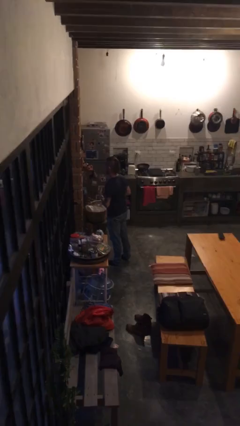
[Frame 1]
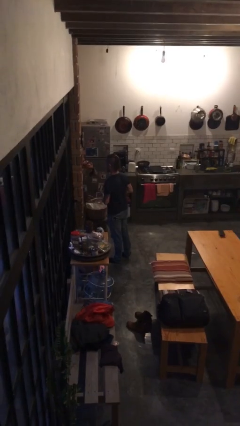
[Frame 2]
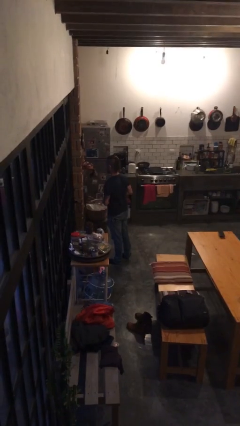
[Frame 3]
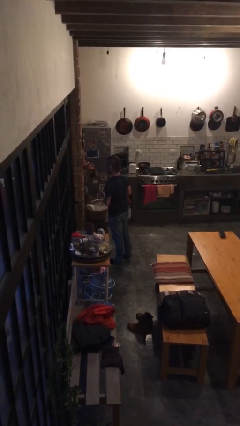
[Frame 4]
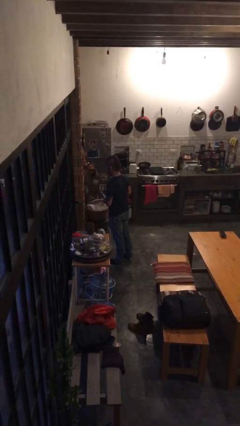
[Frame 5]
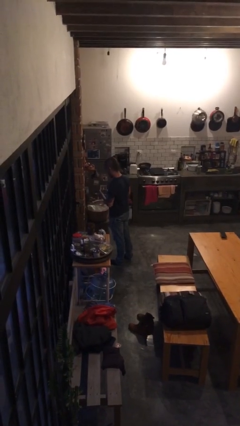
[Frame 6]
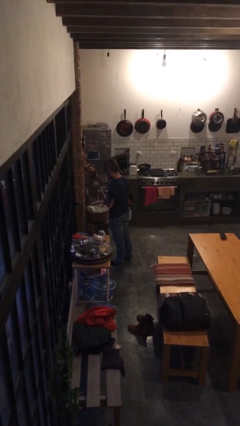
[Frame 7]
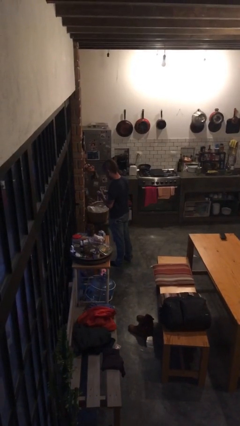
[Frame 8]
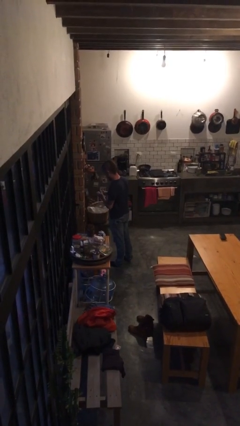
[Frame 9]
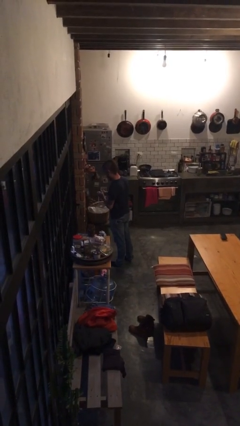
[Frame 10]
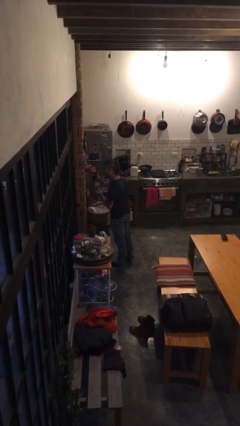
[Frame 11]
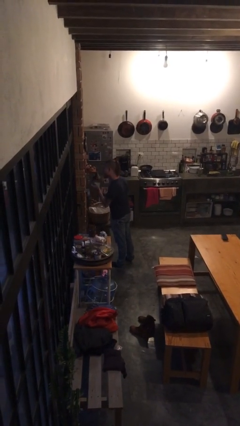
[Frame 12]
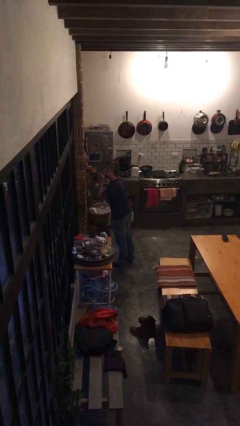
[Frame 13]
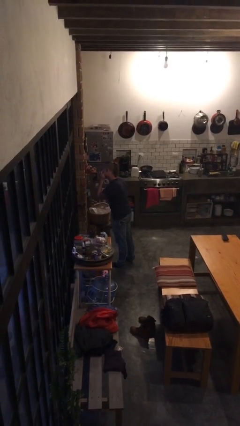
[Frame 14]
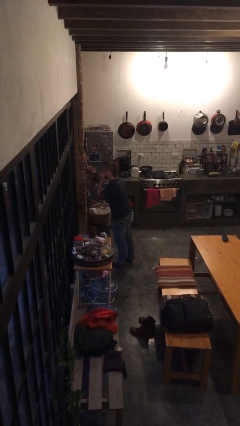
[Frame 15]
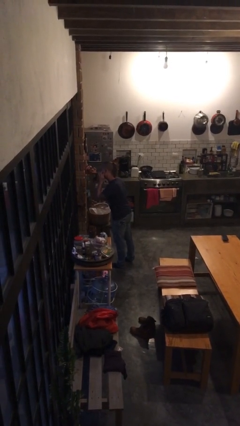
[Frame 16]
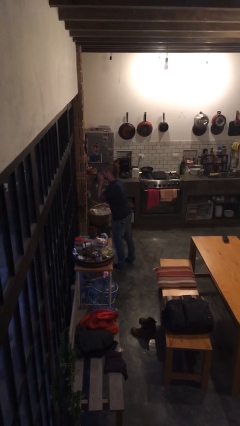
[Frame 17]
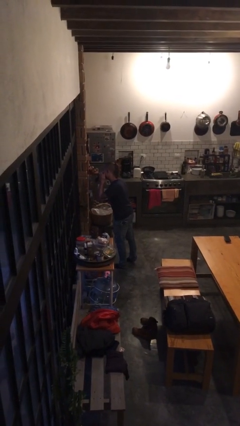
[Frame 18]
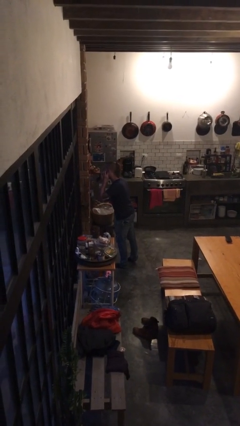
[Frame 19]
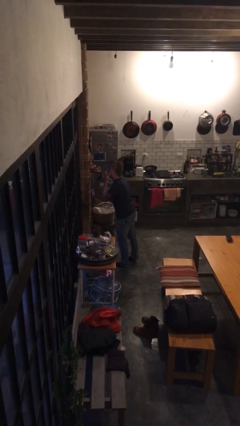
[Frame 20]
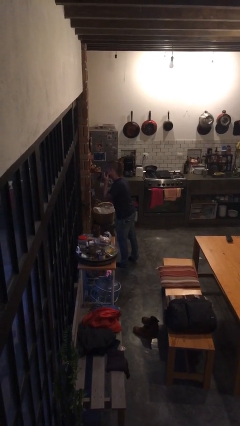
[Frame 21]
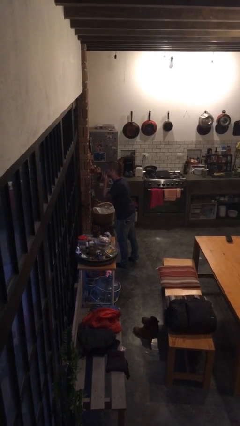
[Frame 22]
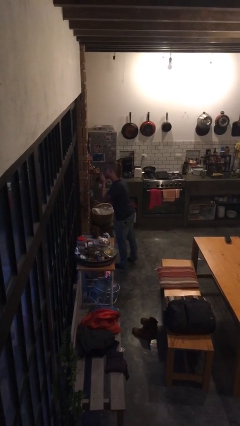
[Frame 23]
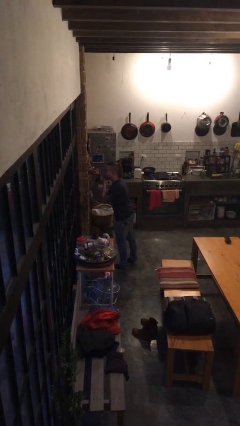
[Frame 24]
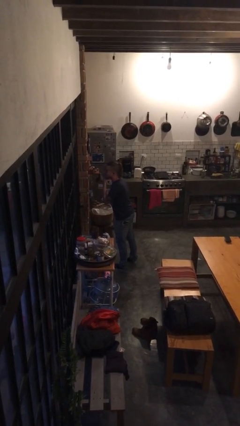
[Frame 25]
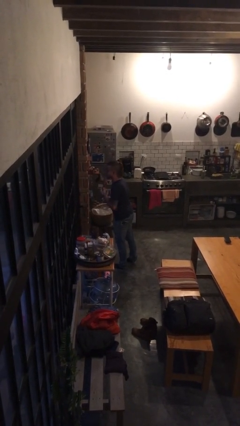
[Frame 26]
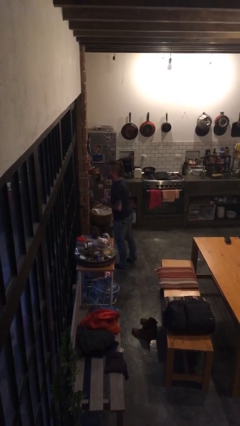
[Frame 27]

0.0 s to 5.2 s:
person applies foundation makeup

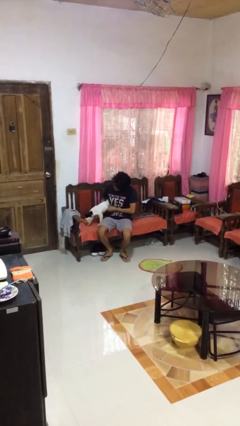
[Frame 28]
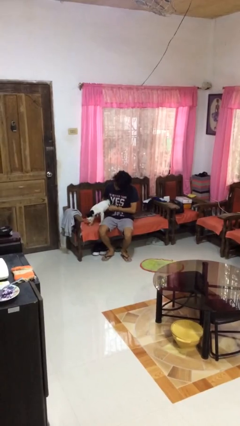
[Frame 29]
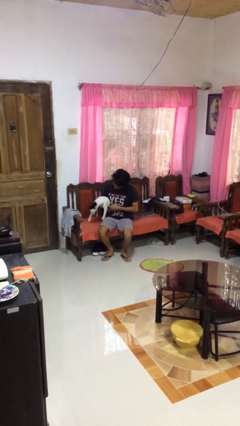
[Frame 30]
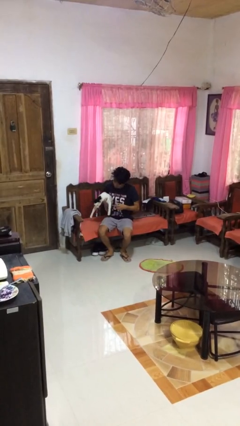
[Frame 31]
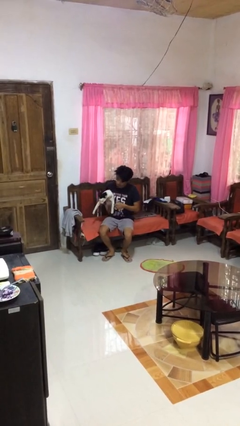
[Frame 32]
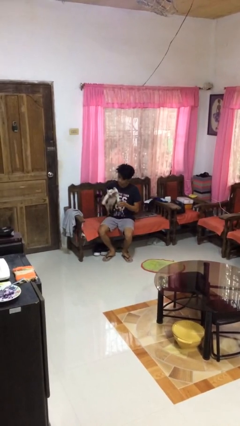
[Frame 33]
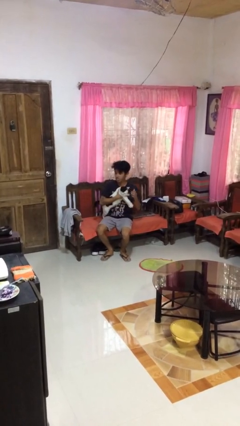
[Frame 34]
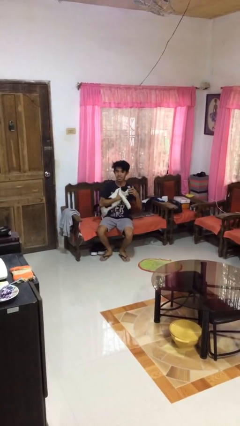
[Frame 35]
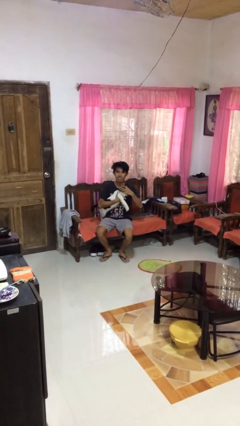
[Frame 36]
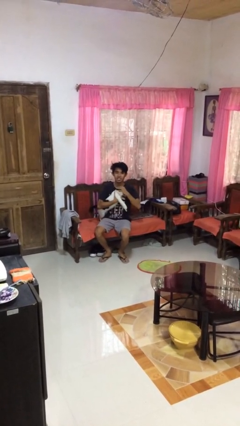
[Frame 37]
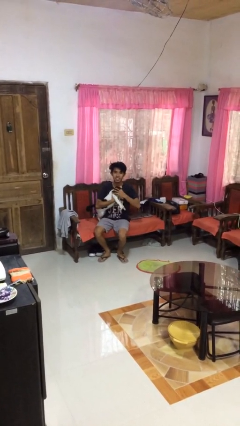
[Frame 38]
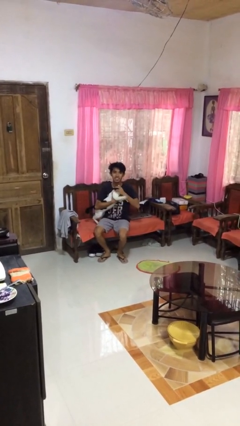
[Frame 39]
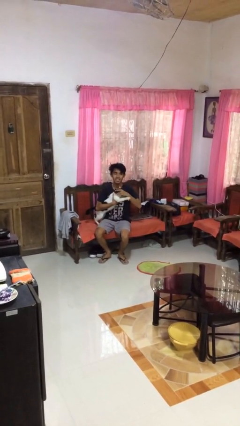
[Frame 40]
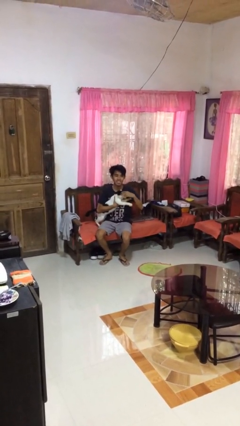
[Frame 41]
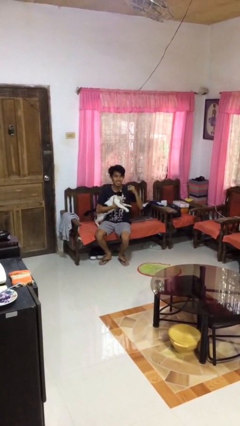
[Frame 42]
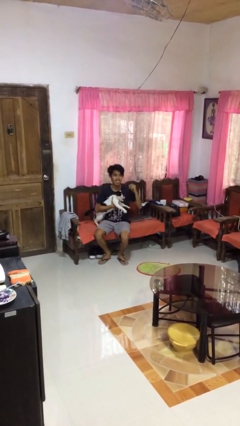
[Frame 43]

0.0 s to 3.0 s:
person hugs cat

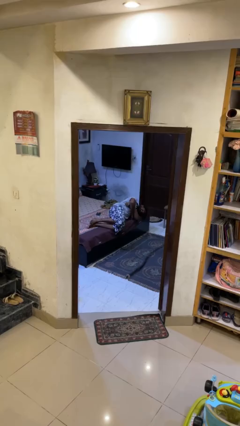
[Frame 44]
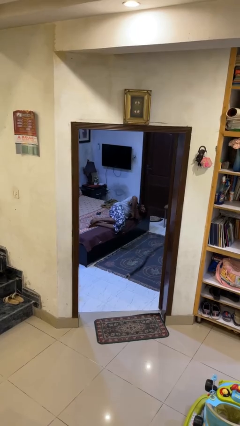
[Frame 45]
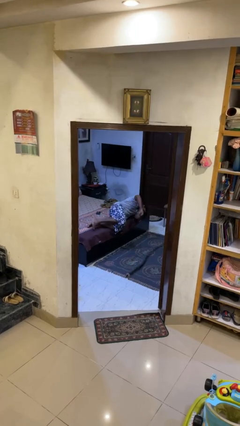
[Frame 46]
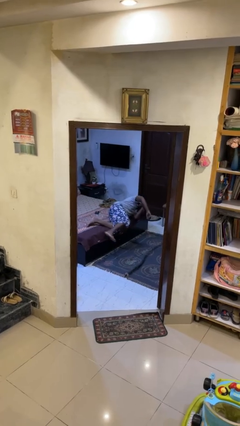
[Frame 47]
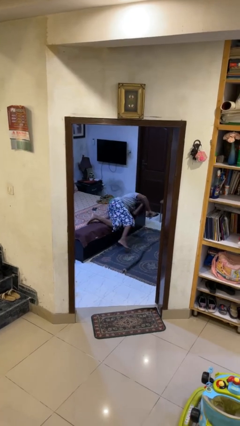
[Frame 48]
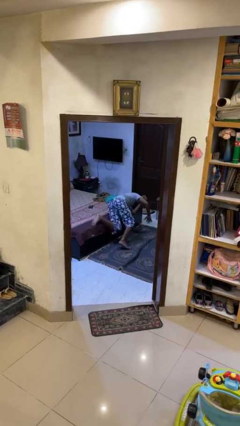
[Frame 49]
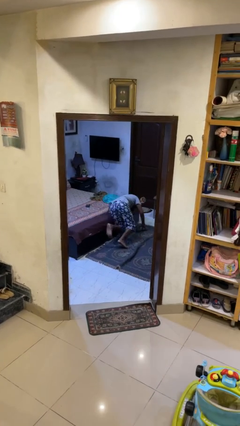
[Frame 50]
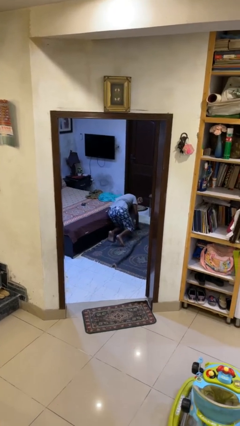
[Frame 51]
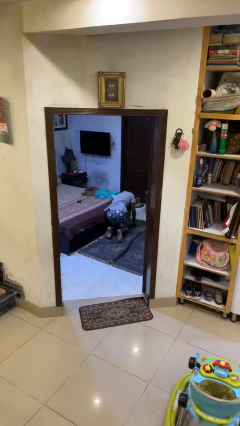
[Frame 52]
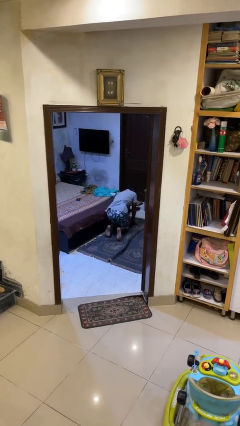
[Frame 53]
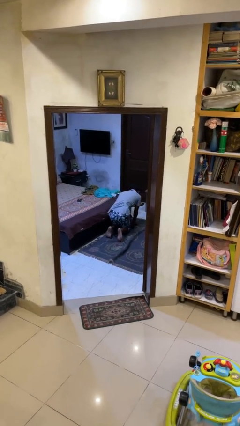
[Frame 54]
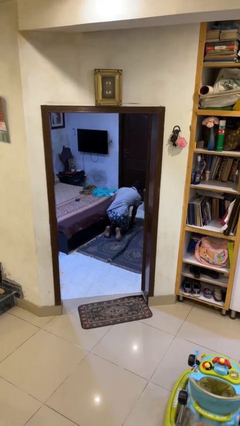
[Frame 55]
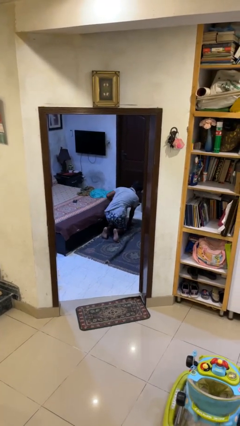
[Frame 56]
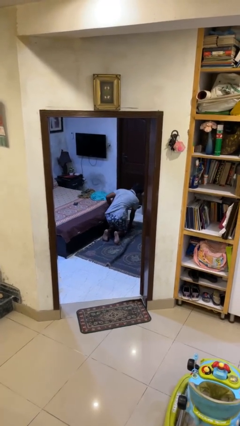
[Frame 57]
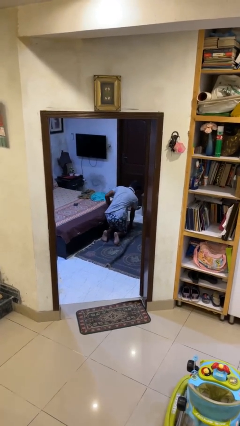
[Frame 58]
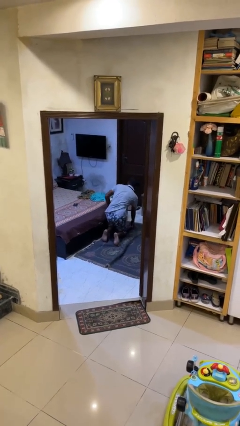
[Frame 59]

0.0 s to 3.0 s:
person falls from bed

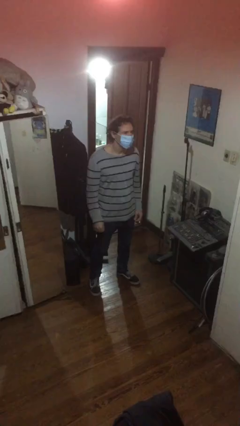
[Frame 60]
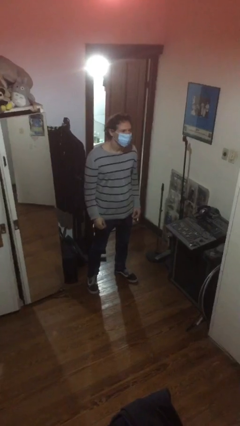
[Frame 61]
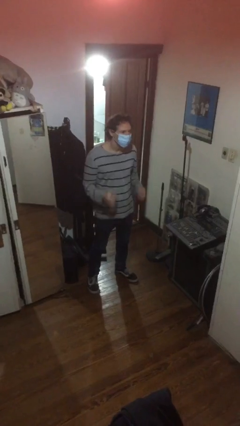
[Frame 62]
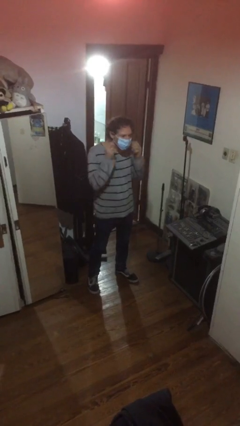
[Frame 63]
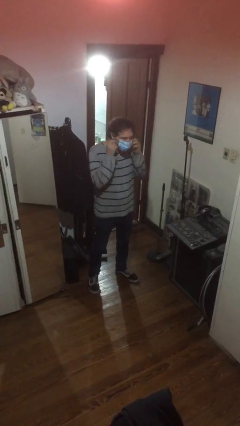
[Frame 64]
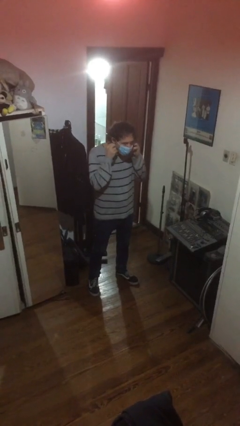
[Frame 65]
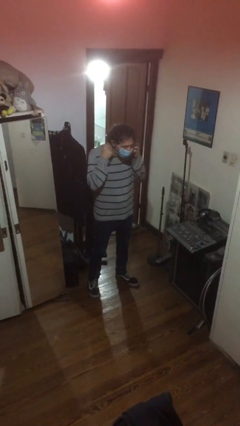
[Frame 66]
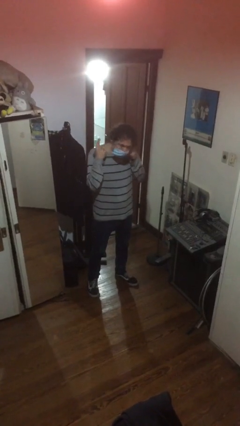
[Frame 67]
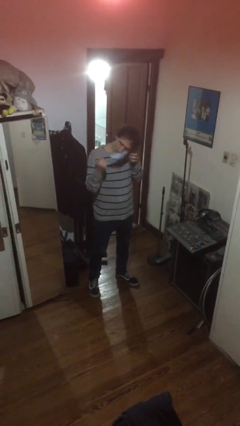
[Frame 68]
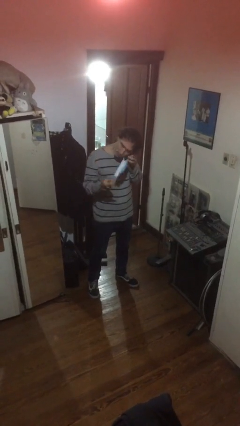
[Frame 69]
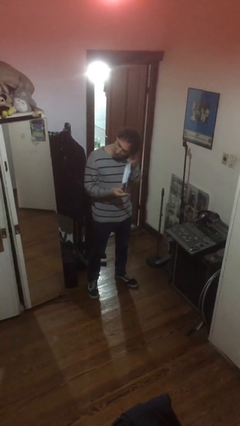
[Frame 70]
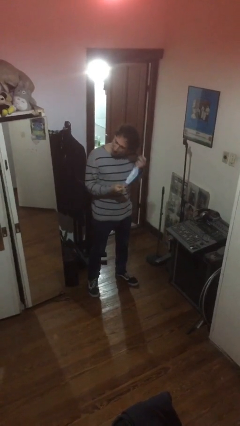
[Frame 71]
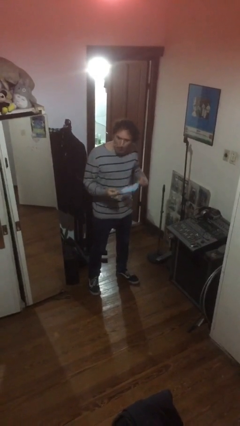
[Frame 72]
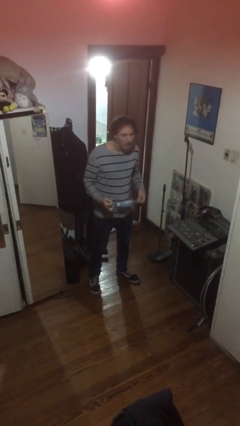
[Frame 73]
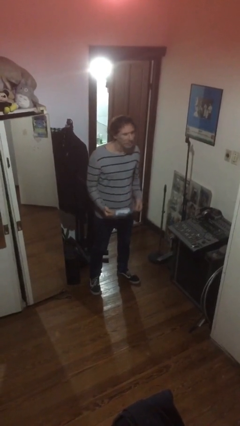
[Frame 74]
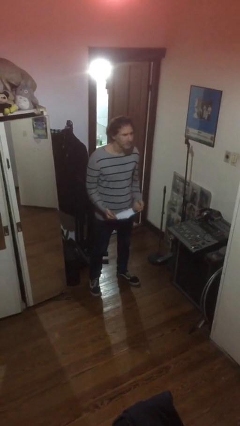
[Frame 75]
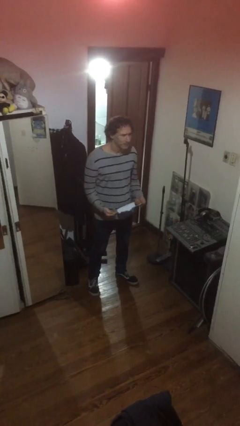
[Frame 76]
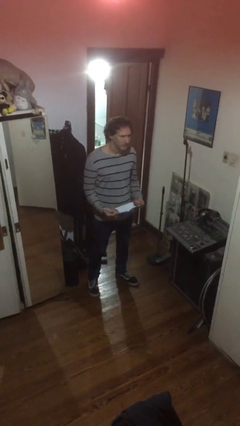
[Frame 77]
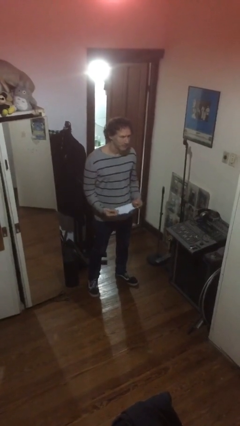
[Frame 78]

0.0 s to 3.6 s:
person takes off facemask

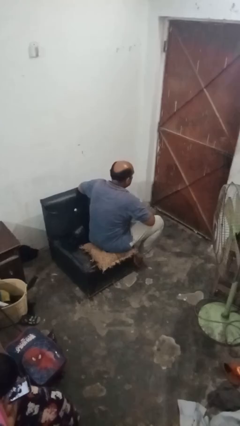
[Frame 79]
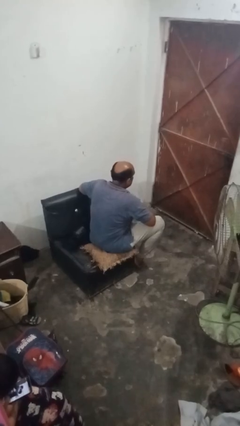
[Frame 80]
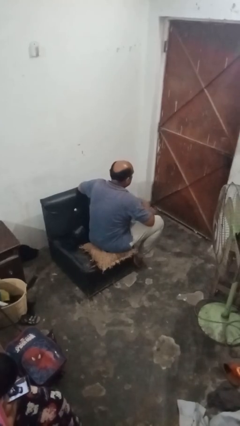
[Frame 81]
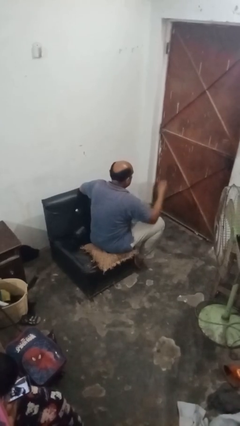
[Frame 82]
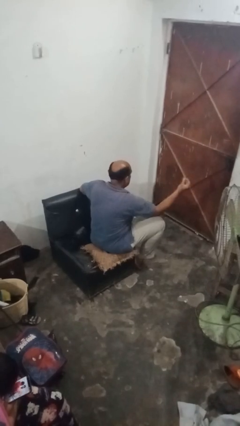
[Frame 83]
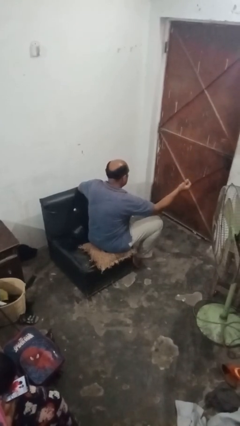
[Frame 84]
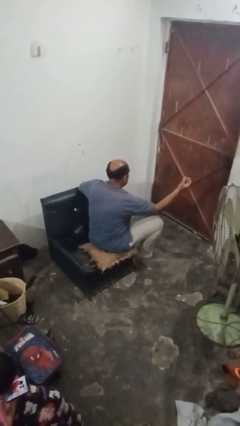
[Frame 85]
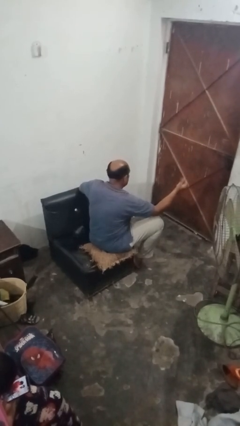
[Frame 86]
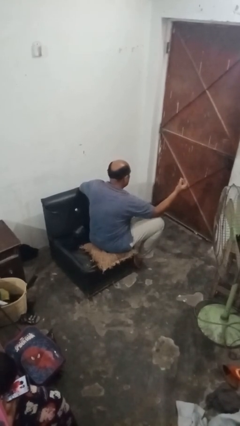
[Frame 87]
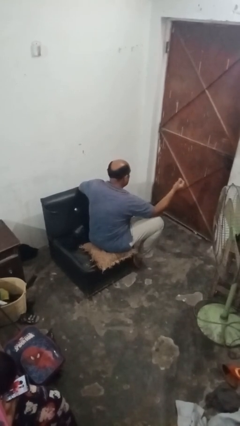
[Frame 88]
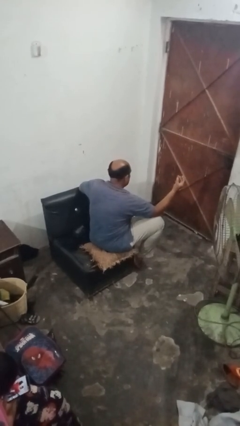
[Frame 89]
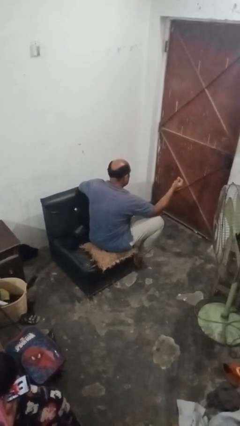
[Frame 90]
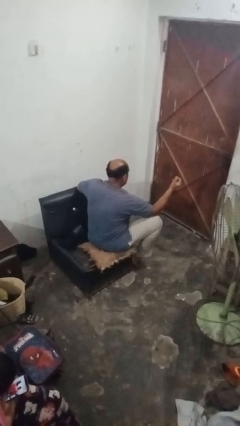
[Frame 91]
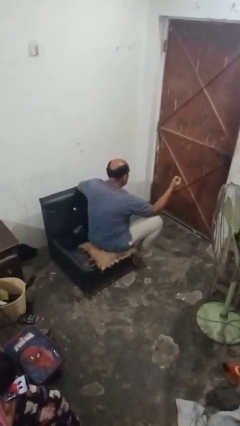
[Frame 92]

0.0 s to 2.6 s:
person snaps fingers

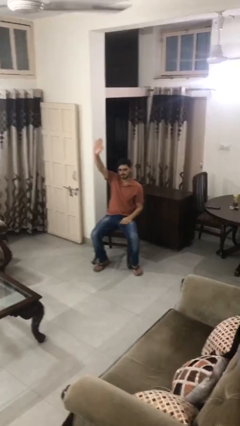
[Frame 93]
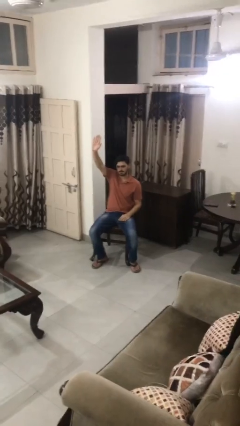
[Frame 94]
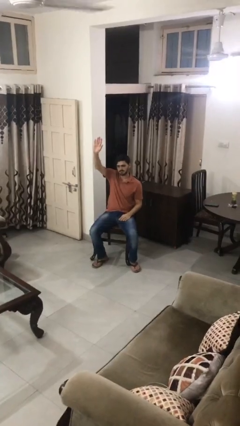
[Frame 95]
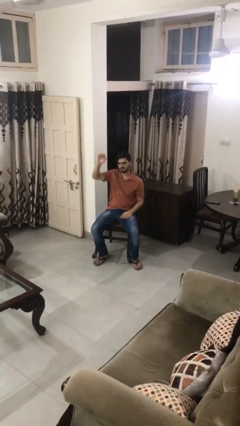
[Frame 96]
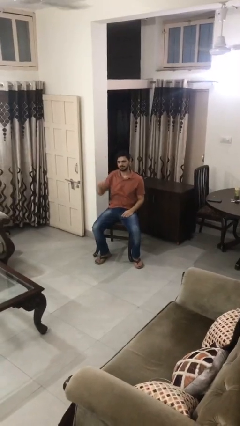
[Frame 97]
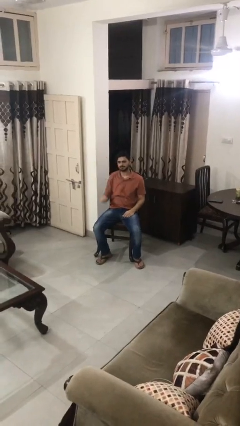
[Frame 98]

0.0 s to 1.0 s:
person gestures lower hand
